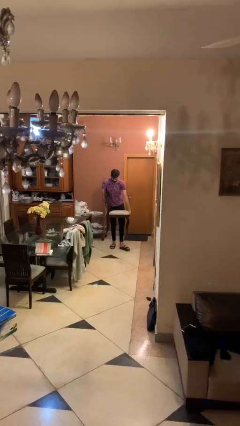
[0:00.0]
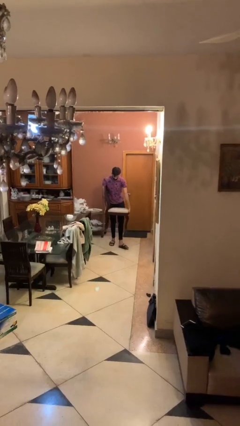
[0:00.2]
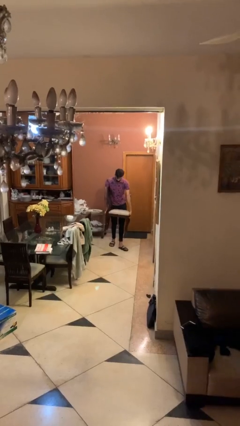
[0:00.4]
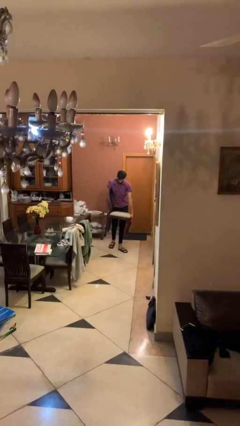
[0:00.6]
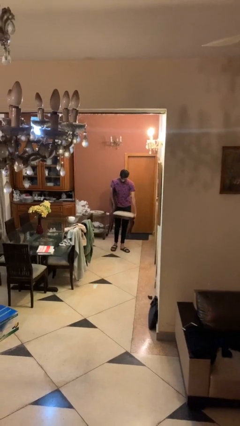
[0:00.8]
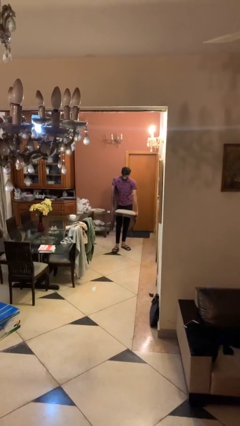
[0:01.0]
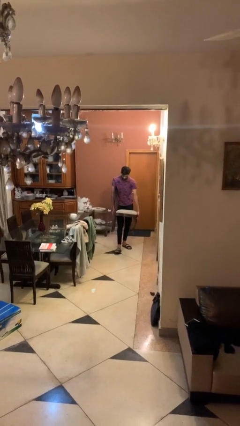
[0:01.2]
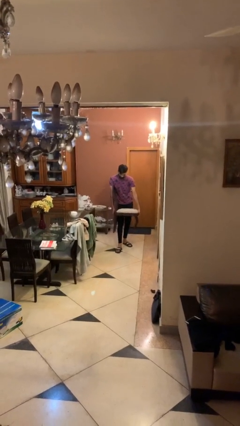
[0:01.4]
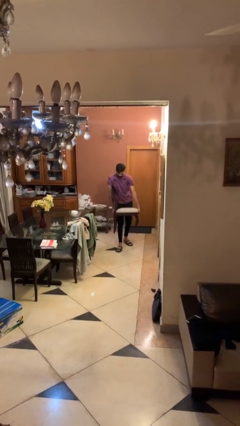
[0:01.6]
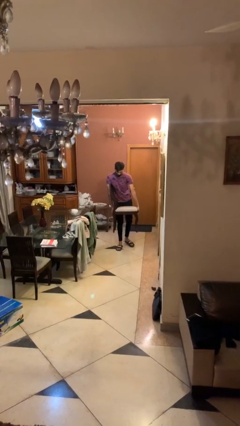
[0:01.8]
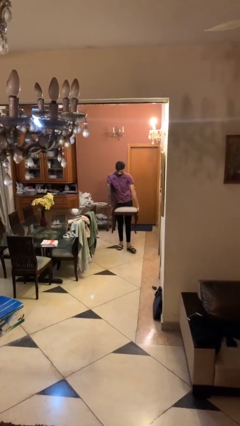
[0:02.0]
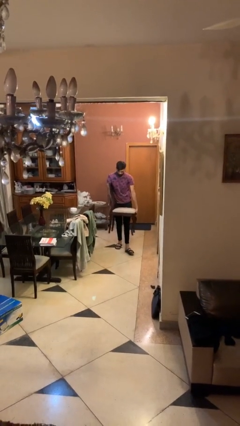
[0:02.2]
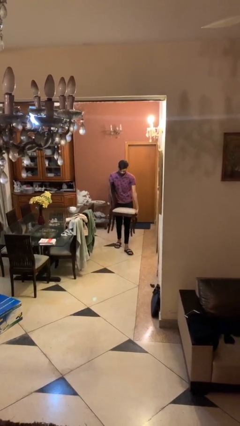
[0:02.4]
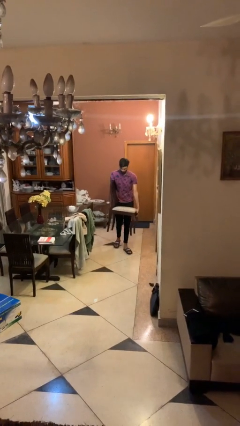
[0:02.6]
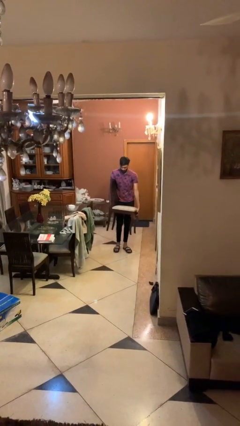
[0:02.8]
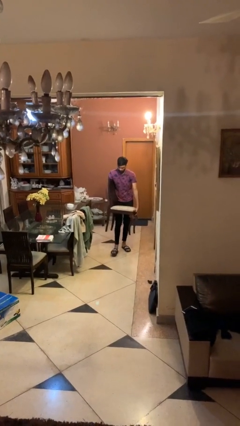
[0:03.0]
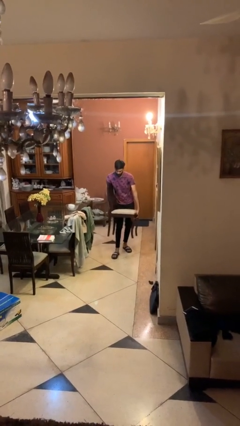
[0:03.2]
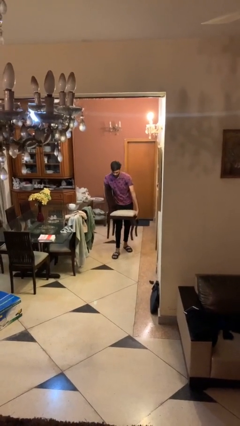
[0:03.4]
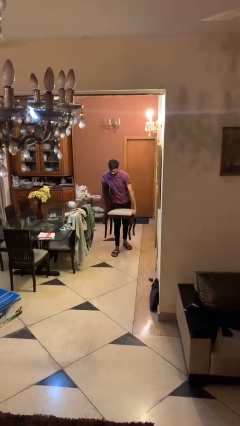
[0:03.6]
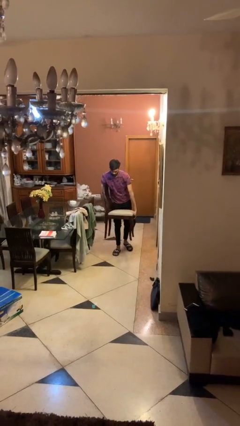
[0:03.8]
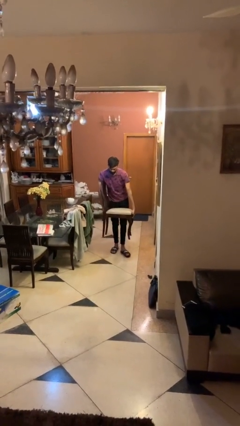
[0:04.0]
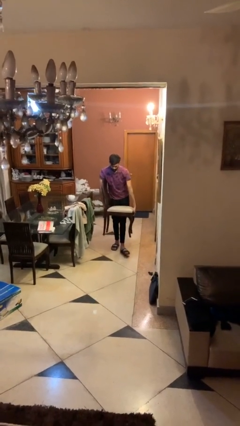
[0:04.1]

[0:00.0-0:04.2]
person carries heavy object

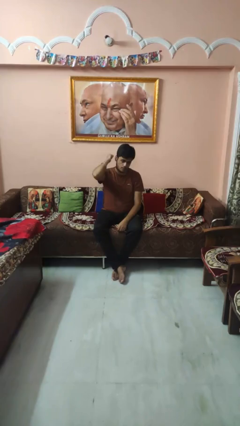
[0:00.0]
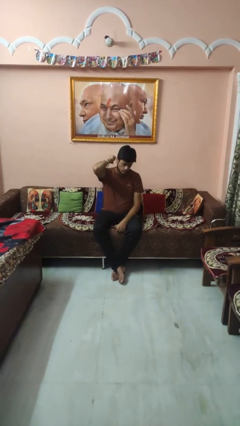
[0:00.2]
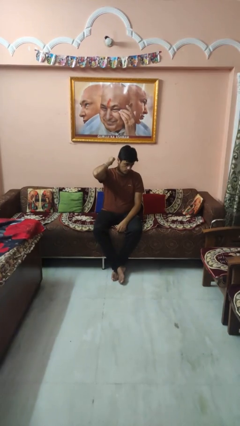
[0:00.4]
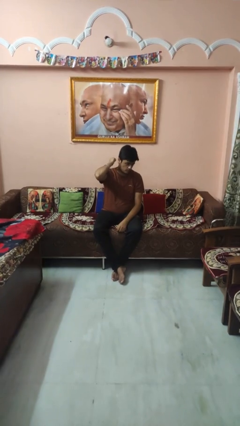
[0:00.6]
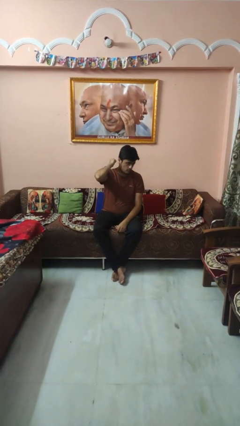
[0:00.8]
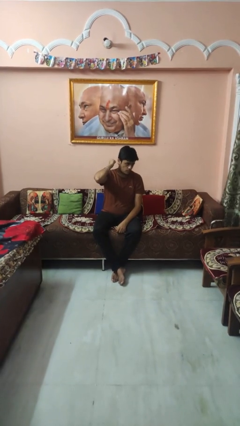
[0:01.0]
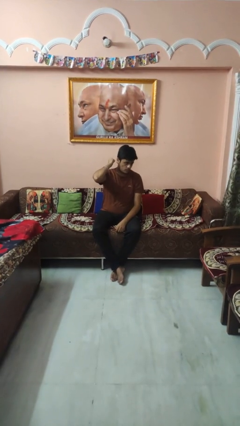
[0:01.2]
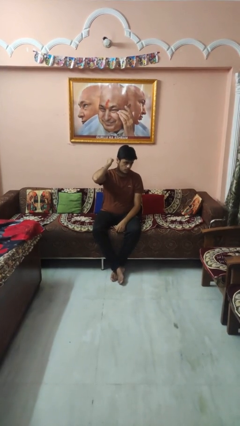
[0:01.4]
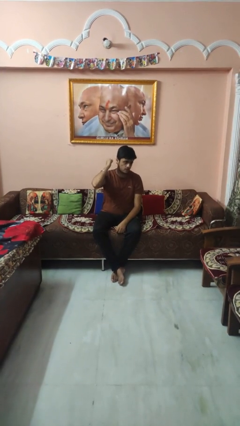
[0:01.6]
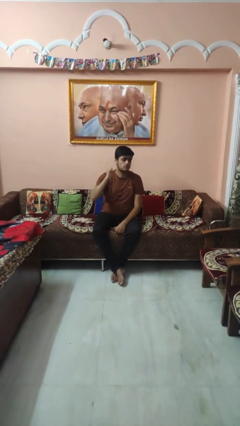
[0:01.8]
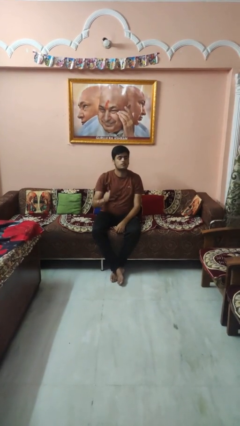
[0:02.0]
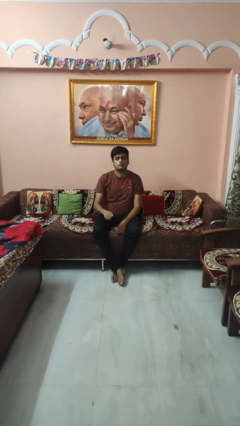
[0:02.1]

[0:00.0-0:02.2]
person gestures behind me

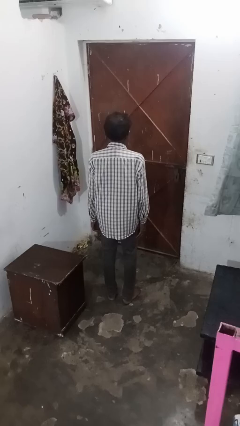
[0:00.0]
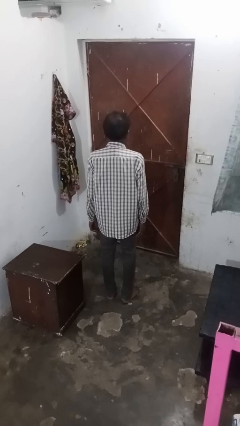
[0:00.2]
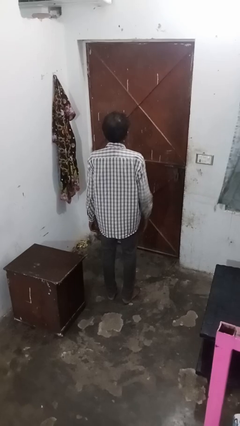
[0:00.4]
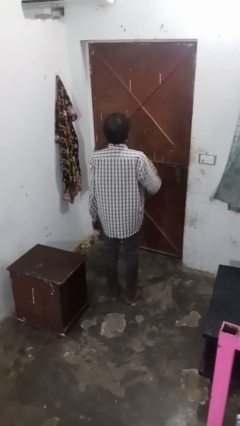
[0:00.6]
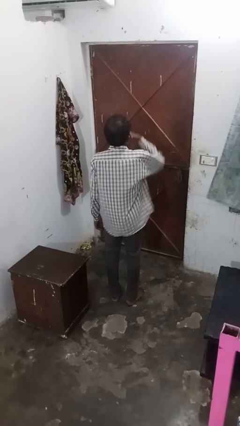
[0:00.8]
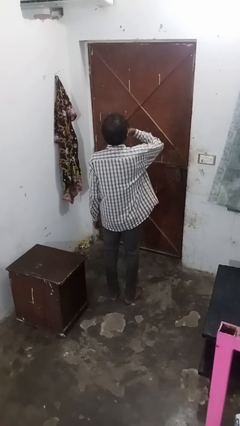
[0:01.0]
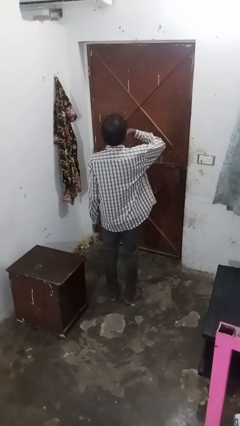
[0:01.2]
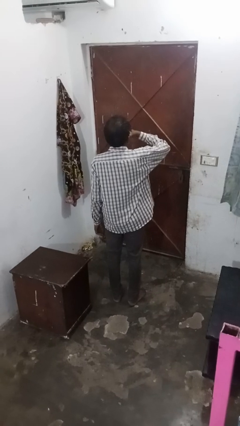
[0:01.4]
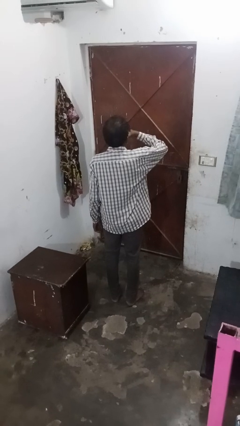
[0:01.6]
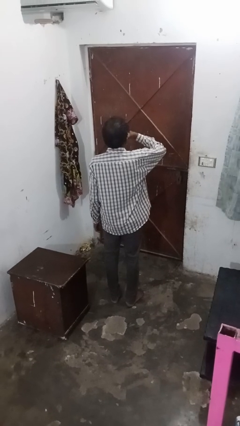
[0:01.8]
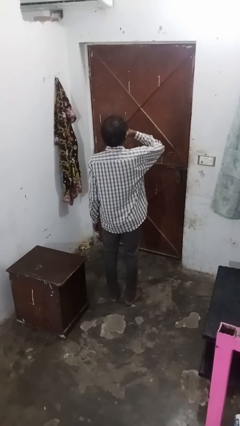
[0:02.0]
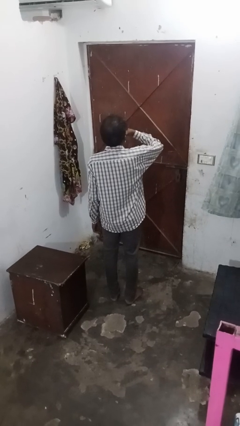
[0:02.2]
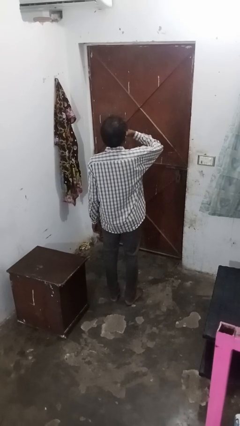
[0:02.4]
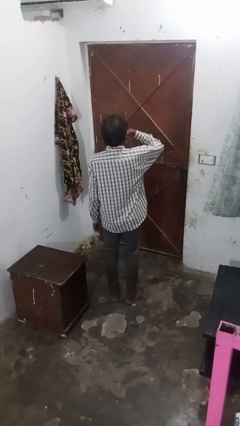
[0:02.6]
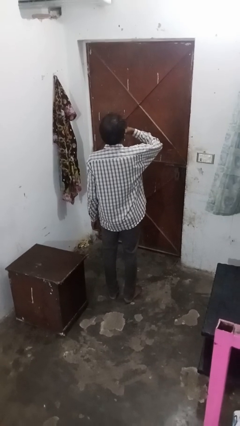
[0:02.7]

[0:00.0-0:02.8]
person strokes chin

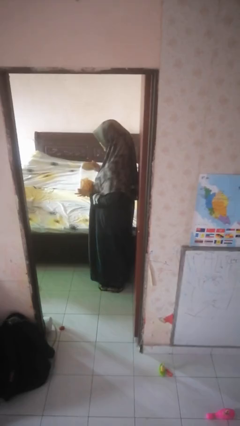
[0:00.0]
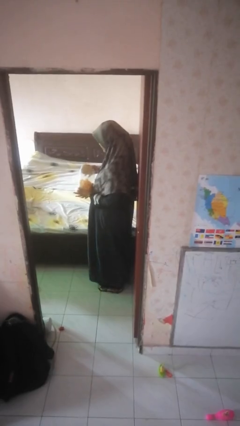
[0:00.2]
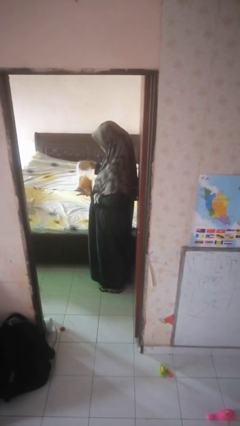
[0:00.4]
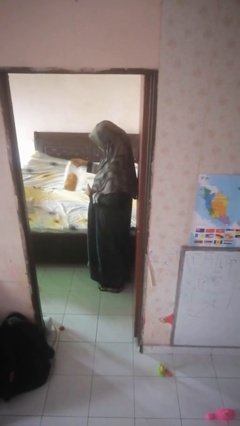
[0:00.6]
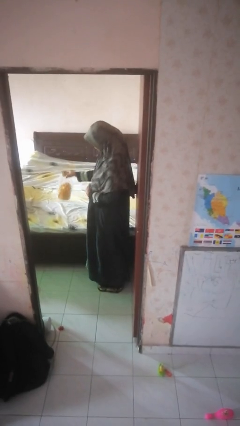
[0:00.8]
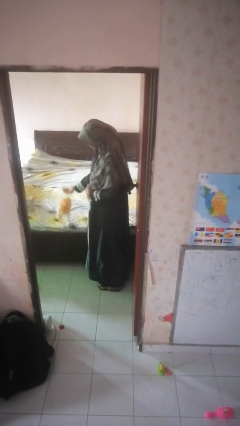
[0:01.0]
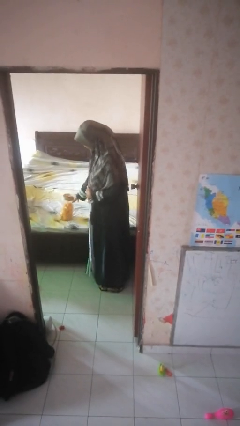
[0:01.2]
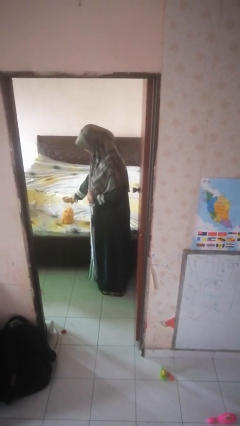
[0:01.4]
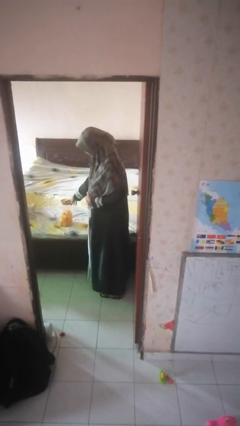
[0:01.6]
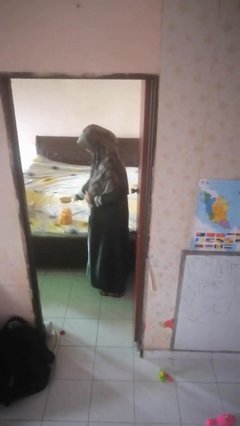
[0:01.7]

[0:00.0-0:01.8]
person puts down object on bed

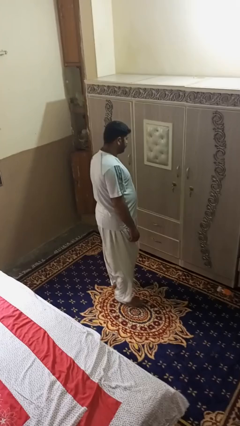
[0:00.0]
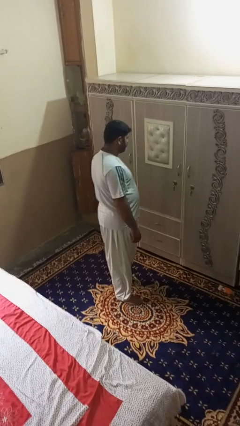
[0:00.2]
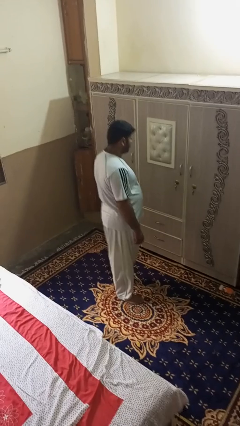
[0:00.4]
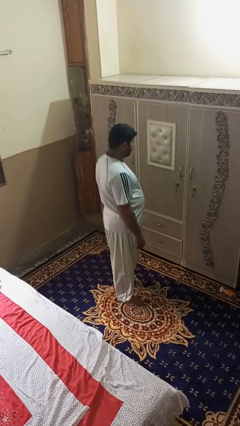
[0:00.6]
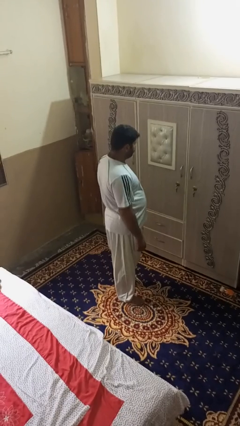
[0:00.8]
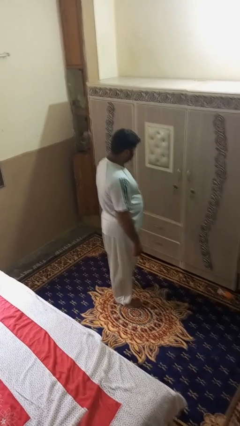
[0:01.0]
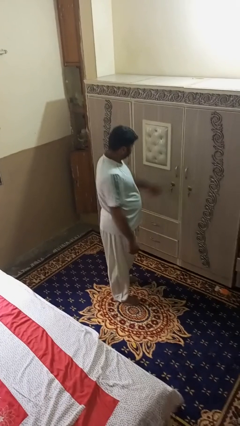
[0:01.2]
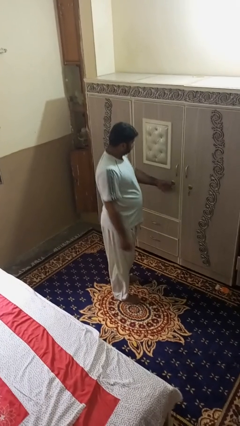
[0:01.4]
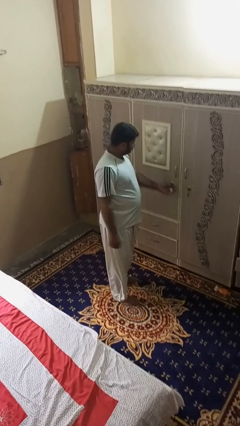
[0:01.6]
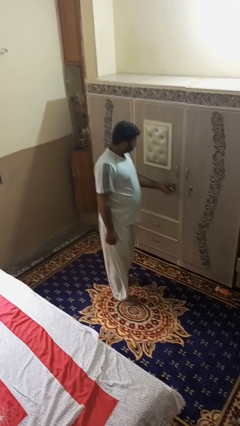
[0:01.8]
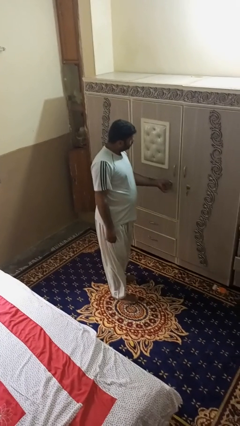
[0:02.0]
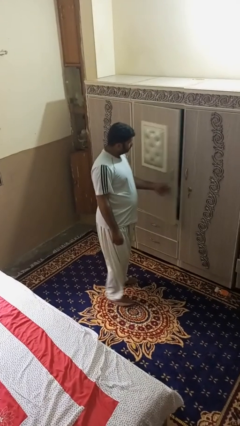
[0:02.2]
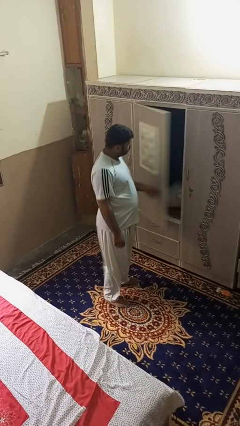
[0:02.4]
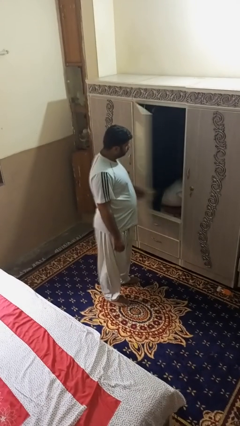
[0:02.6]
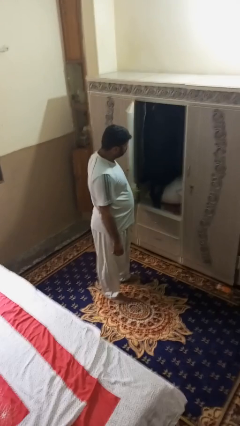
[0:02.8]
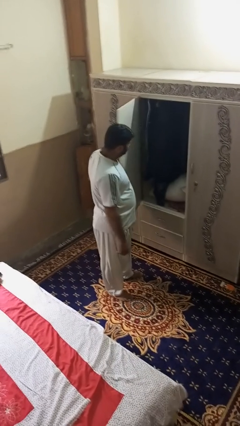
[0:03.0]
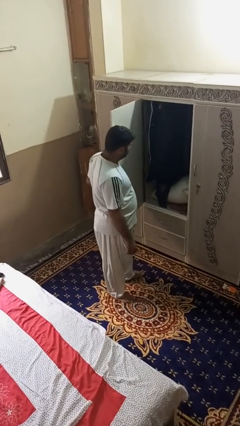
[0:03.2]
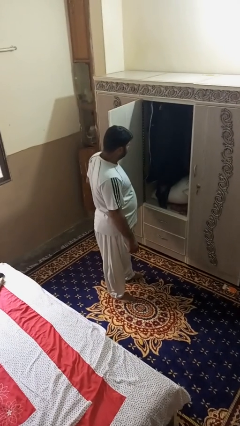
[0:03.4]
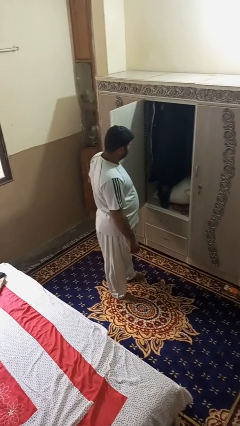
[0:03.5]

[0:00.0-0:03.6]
person opens dresser drawer

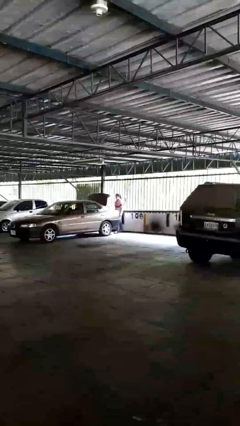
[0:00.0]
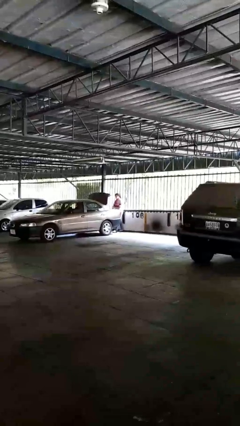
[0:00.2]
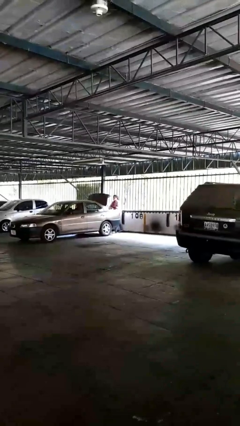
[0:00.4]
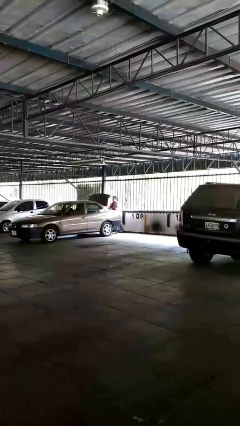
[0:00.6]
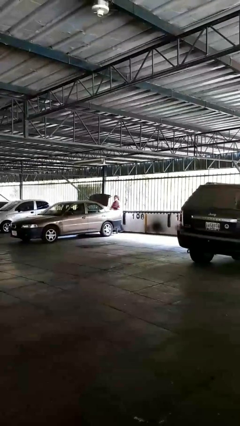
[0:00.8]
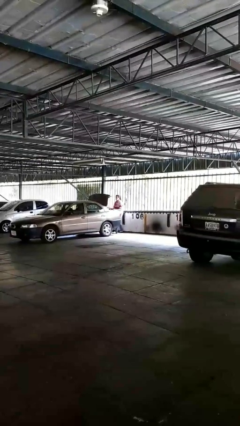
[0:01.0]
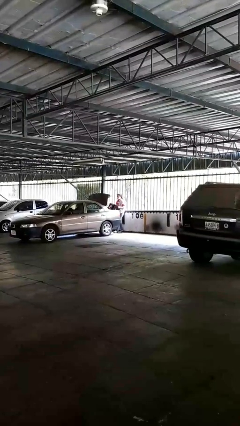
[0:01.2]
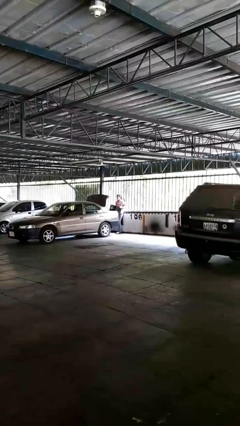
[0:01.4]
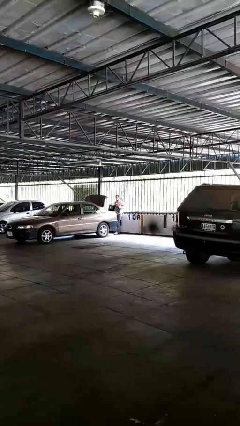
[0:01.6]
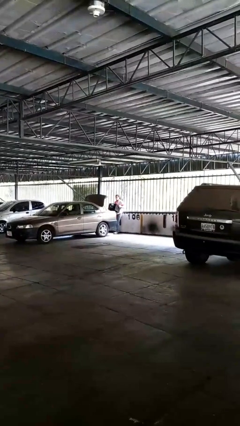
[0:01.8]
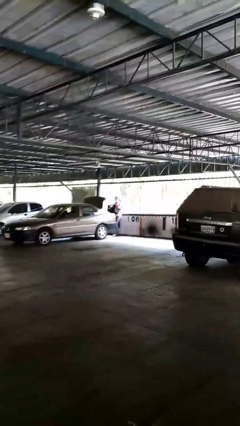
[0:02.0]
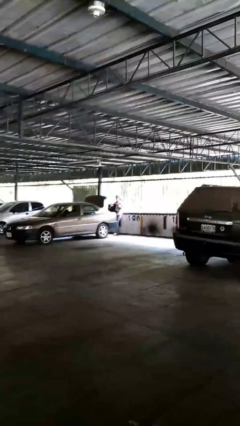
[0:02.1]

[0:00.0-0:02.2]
person unloads car

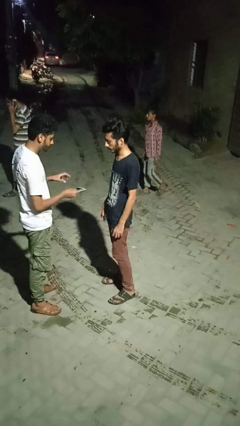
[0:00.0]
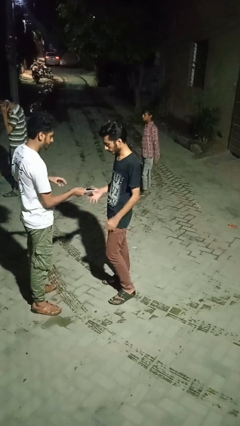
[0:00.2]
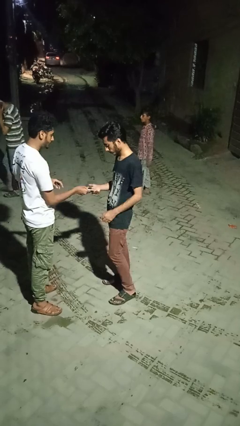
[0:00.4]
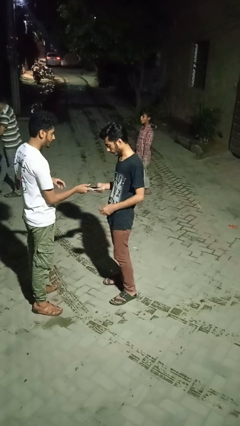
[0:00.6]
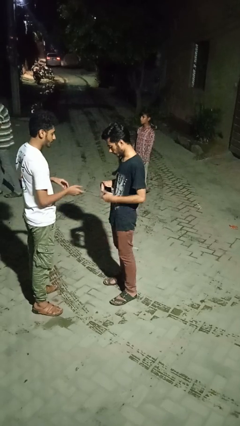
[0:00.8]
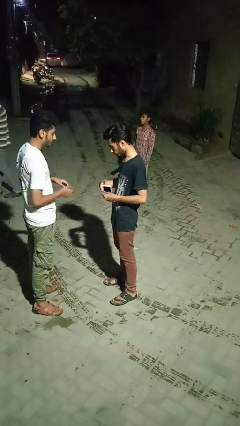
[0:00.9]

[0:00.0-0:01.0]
person transfers object to person
